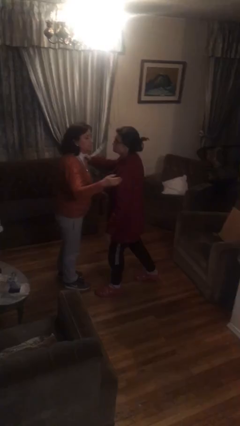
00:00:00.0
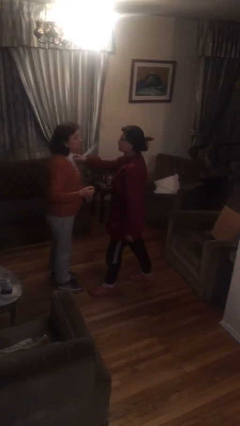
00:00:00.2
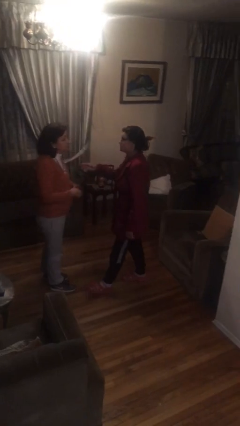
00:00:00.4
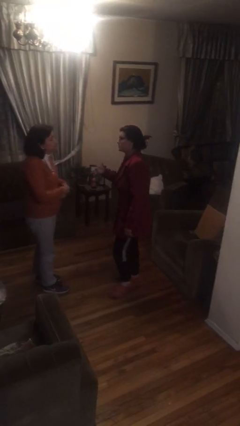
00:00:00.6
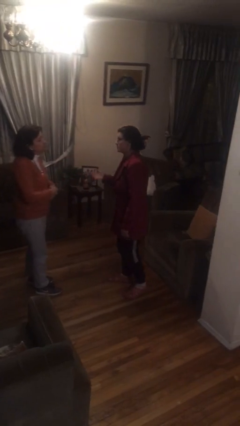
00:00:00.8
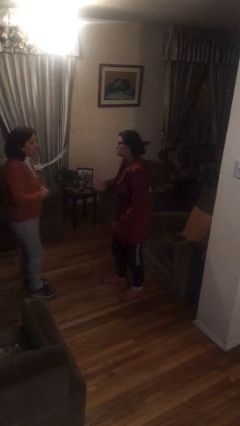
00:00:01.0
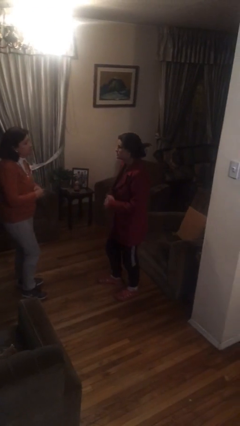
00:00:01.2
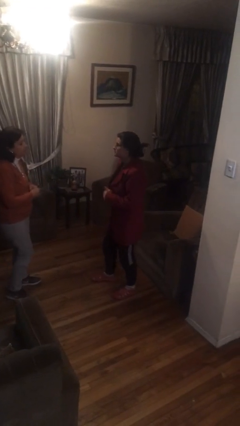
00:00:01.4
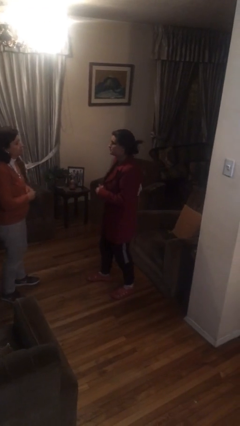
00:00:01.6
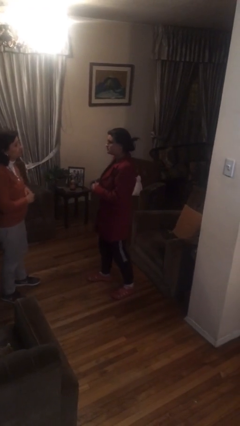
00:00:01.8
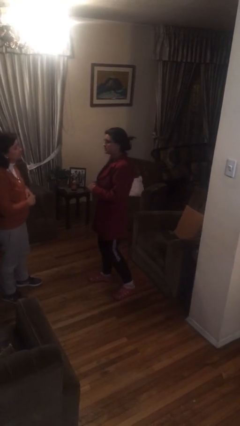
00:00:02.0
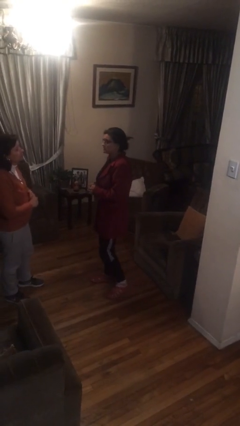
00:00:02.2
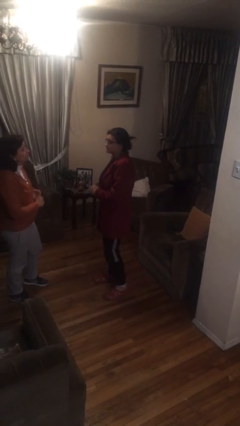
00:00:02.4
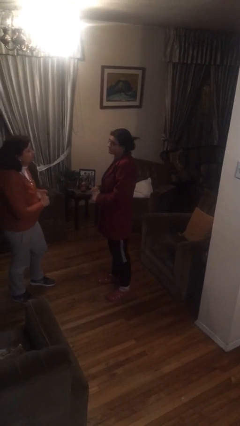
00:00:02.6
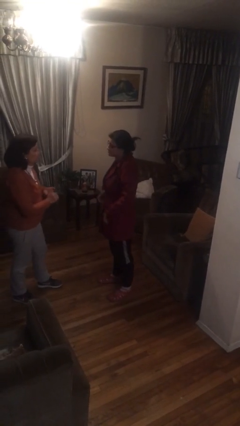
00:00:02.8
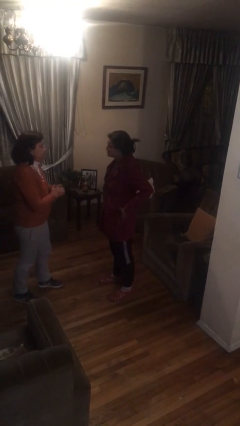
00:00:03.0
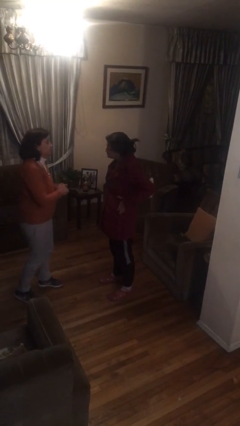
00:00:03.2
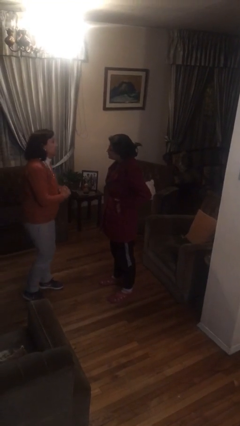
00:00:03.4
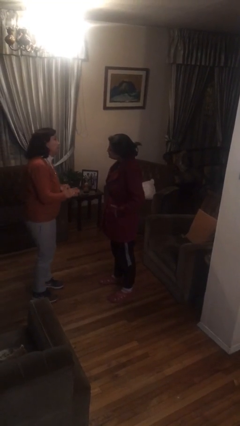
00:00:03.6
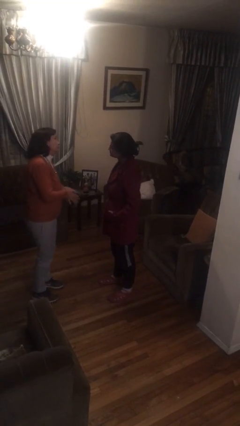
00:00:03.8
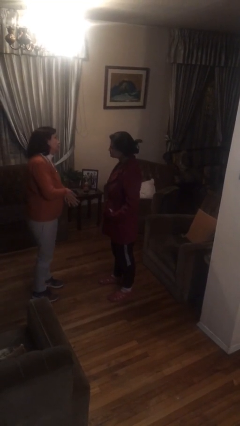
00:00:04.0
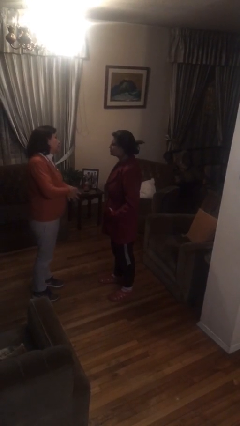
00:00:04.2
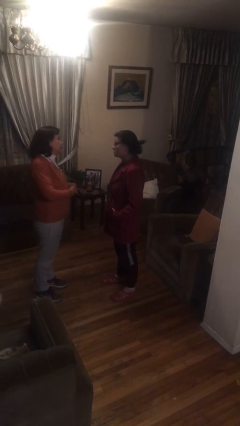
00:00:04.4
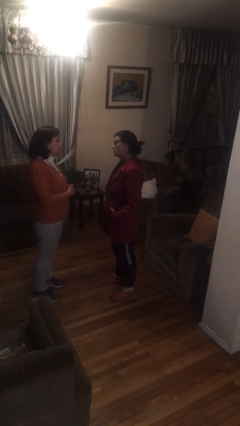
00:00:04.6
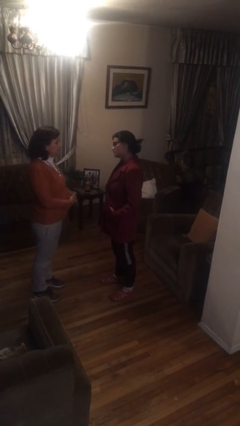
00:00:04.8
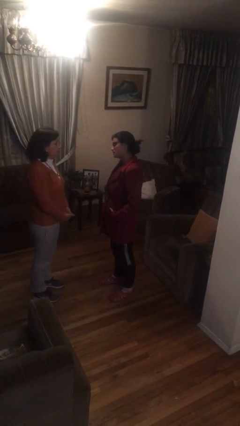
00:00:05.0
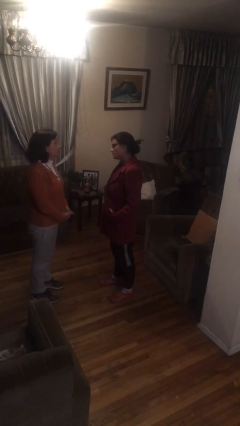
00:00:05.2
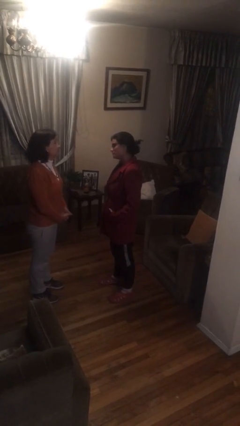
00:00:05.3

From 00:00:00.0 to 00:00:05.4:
person talks to person

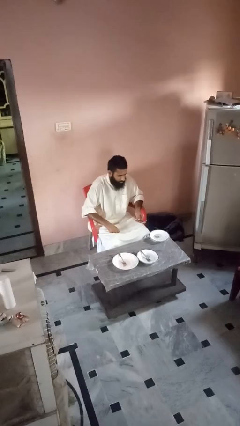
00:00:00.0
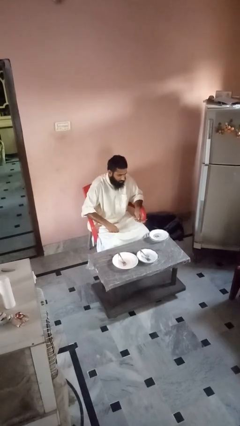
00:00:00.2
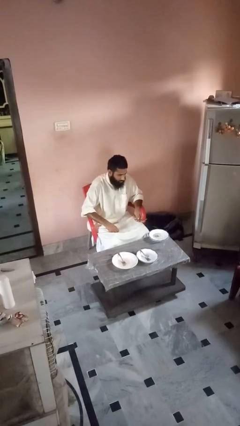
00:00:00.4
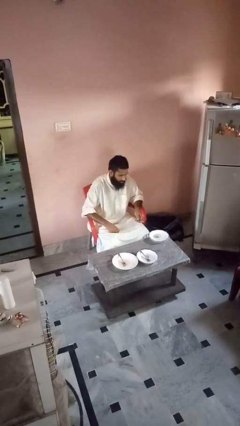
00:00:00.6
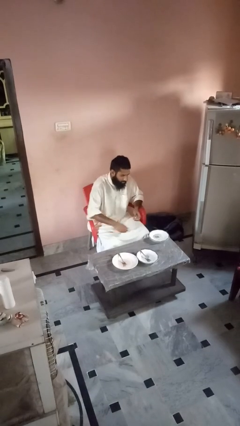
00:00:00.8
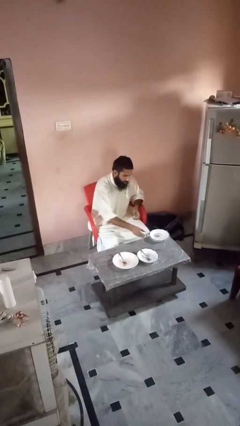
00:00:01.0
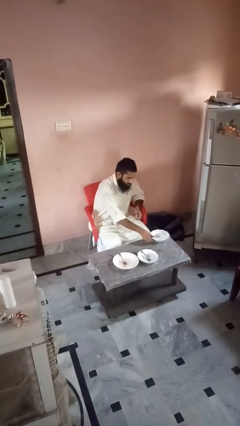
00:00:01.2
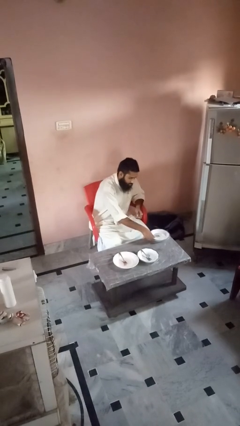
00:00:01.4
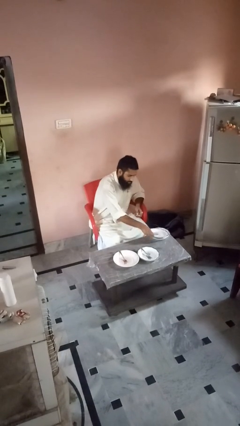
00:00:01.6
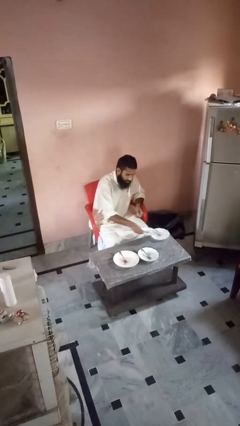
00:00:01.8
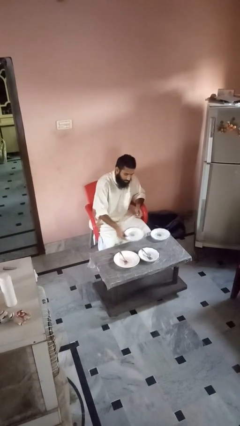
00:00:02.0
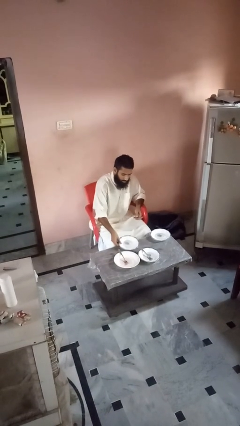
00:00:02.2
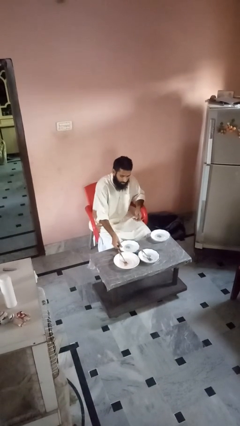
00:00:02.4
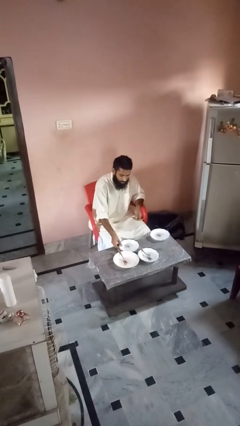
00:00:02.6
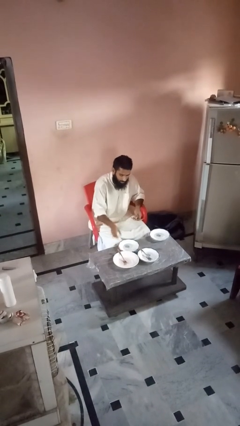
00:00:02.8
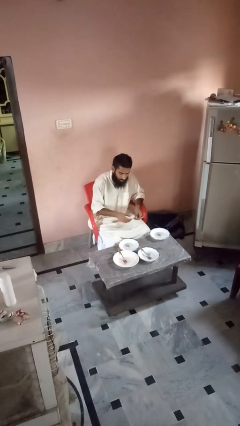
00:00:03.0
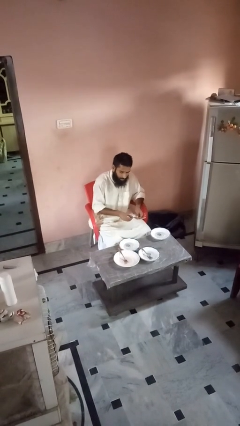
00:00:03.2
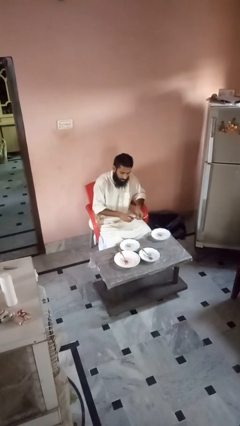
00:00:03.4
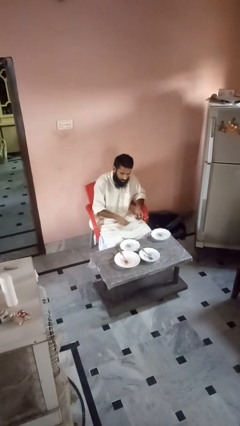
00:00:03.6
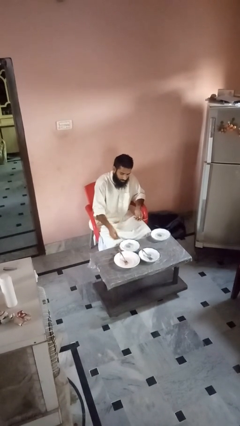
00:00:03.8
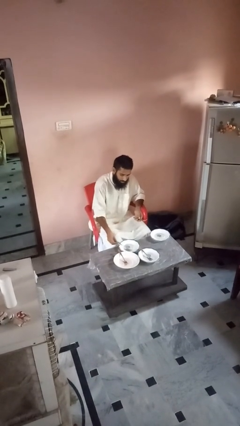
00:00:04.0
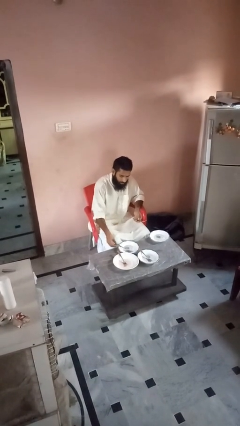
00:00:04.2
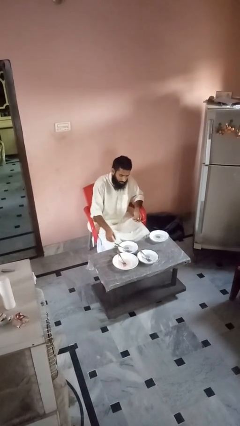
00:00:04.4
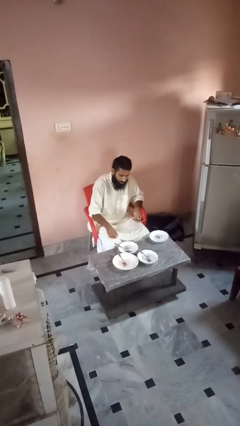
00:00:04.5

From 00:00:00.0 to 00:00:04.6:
person sets table

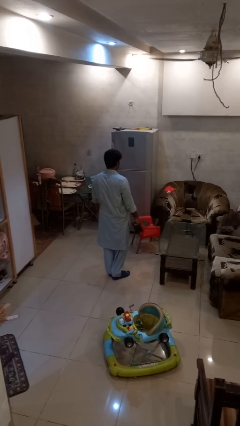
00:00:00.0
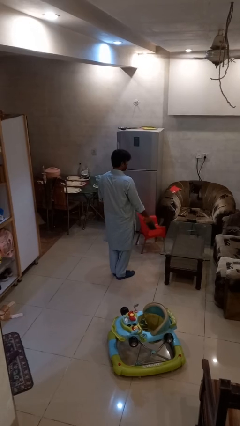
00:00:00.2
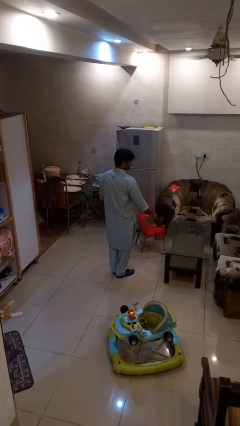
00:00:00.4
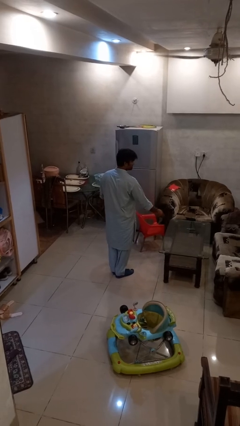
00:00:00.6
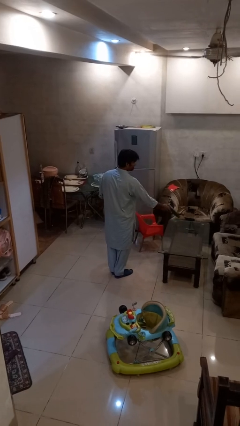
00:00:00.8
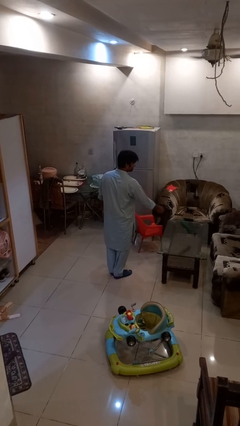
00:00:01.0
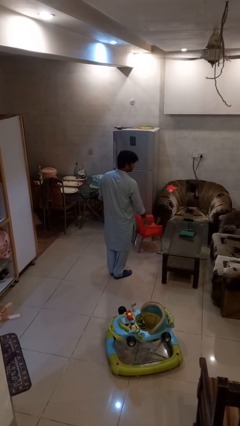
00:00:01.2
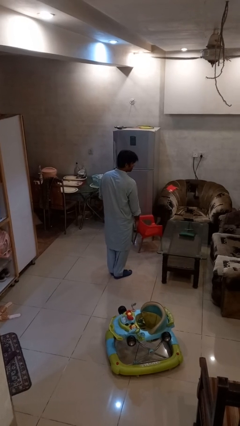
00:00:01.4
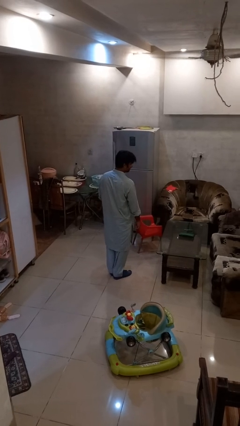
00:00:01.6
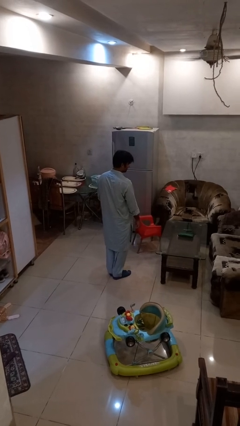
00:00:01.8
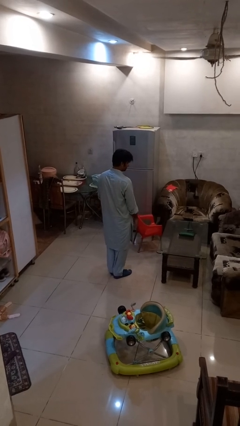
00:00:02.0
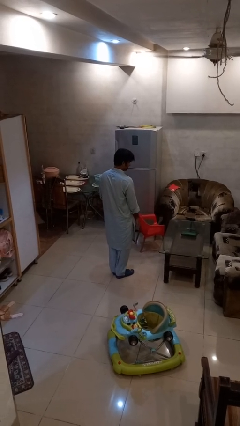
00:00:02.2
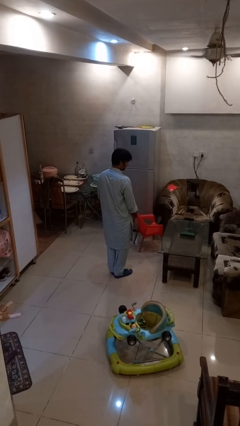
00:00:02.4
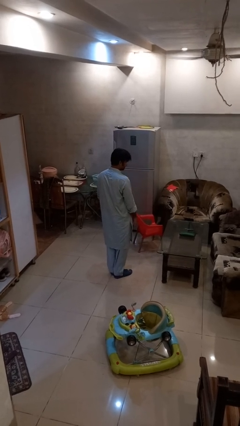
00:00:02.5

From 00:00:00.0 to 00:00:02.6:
person throws object on table

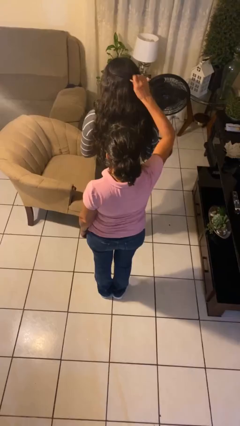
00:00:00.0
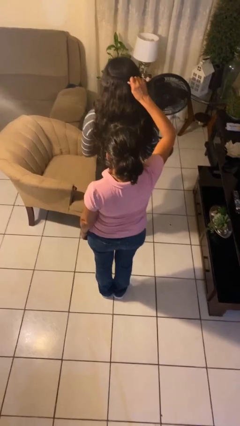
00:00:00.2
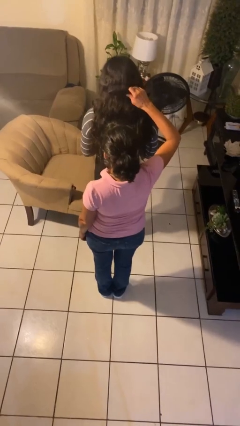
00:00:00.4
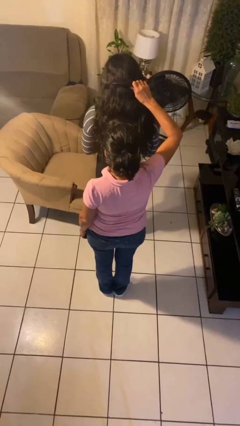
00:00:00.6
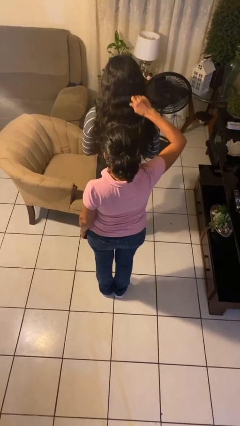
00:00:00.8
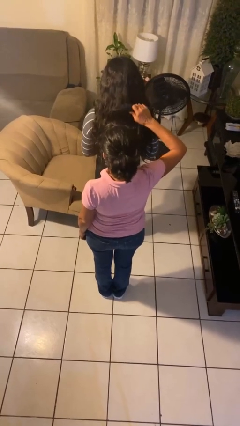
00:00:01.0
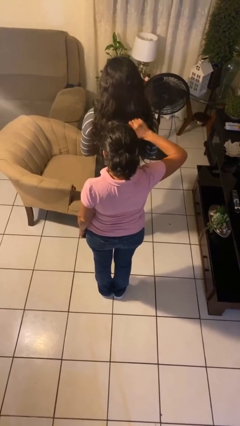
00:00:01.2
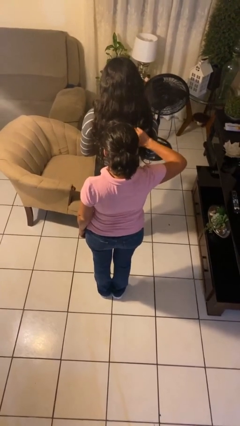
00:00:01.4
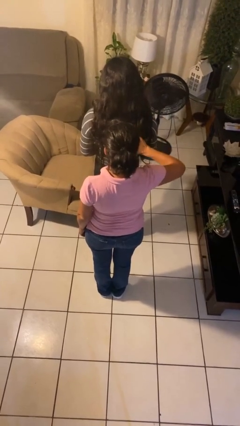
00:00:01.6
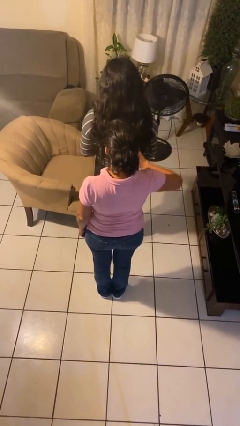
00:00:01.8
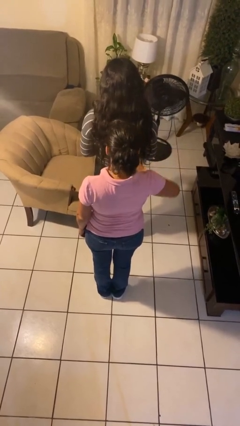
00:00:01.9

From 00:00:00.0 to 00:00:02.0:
person brushes hair of person

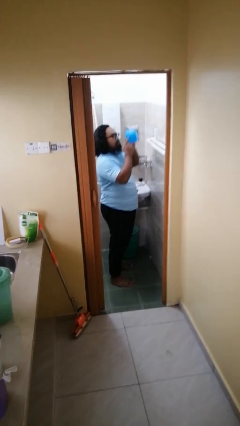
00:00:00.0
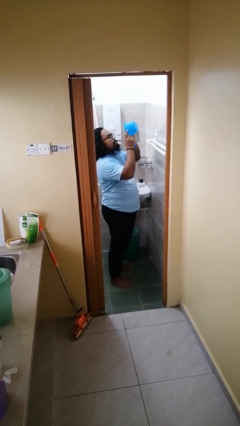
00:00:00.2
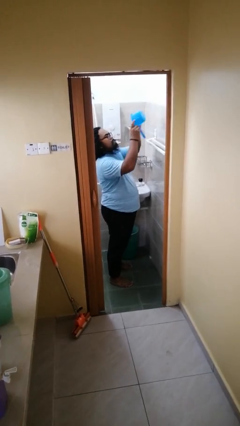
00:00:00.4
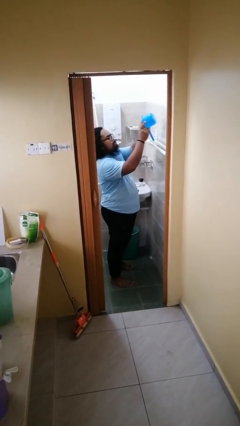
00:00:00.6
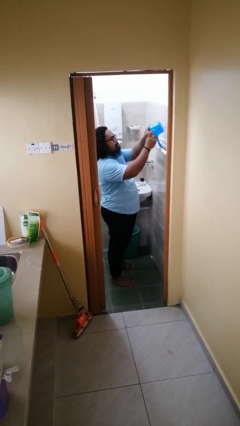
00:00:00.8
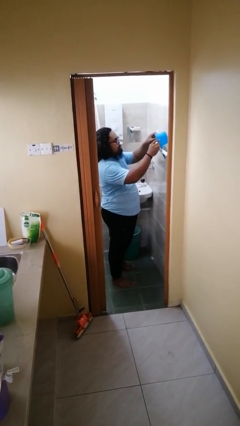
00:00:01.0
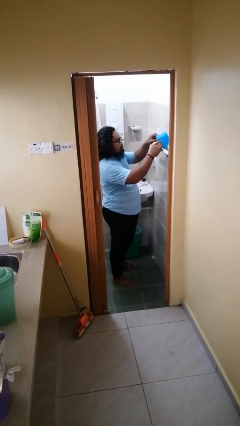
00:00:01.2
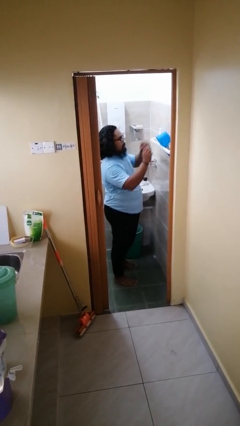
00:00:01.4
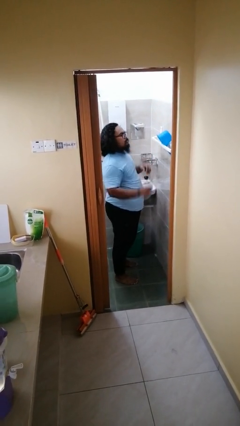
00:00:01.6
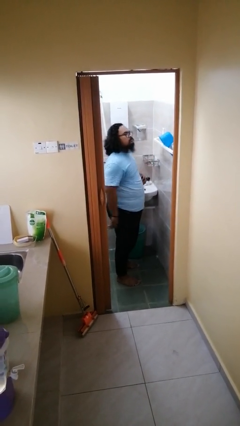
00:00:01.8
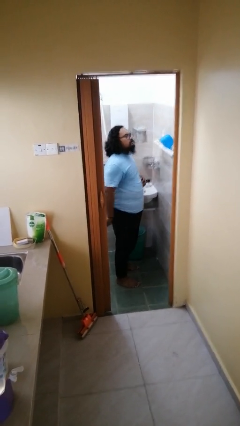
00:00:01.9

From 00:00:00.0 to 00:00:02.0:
person puts down object on countertop

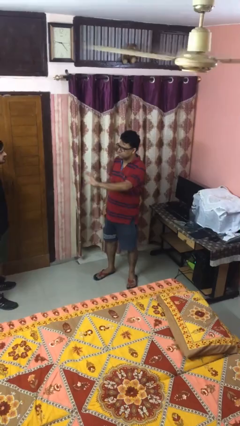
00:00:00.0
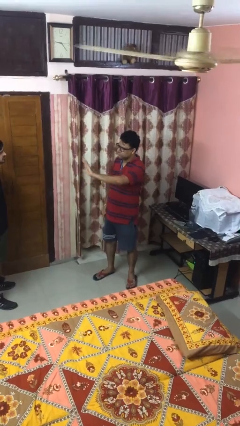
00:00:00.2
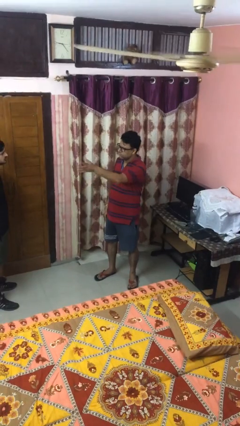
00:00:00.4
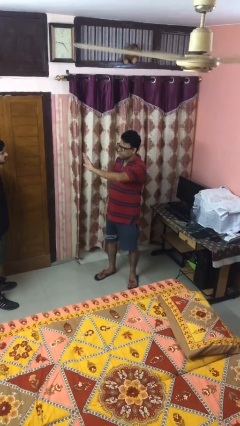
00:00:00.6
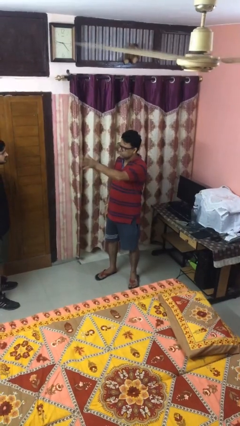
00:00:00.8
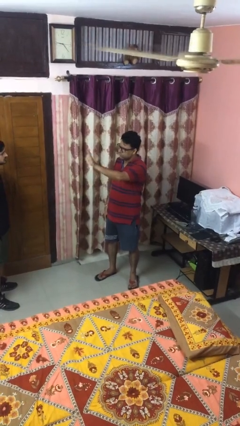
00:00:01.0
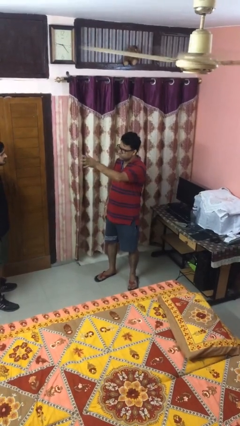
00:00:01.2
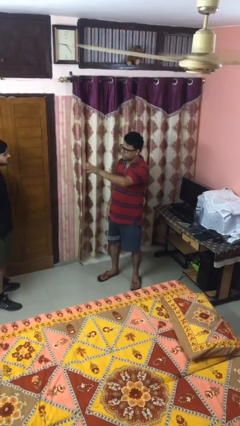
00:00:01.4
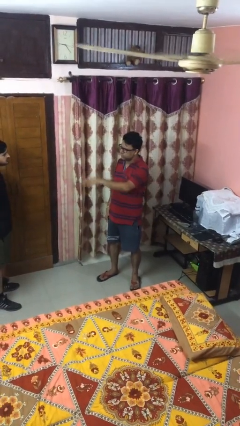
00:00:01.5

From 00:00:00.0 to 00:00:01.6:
person waves at person
